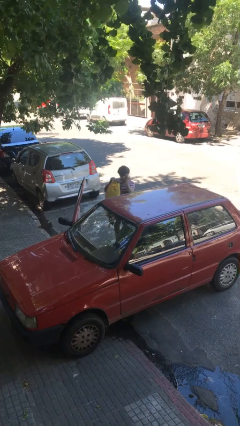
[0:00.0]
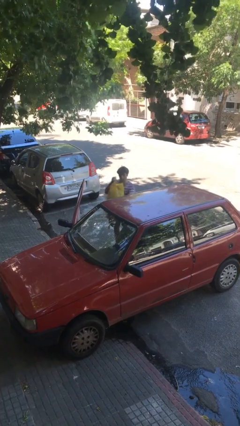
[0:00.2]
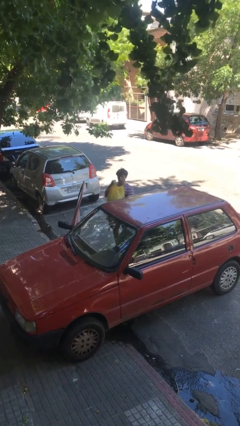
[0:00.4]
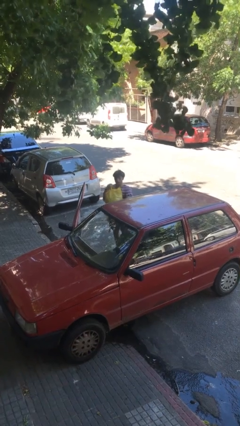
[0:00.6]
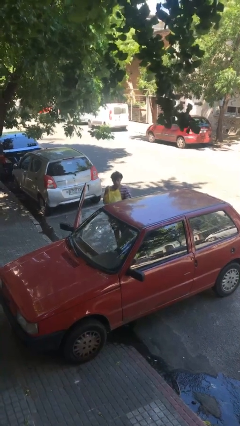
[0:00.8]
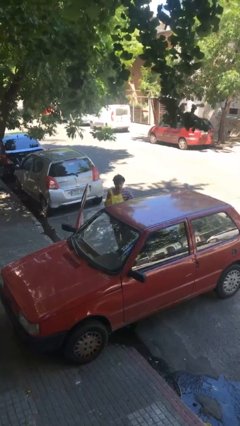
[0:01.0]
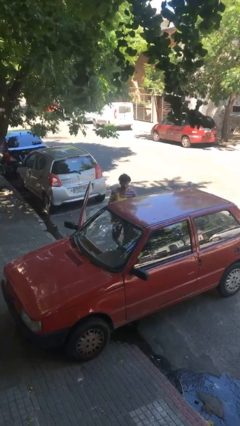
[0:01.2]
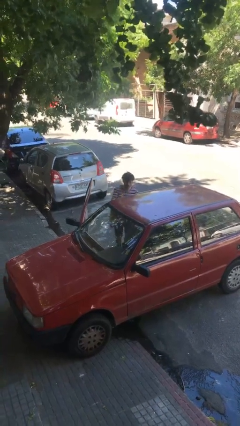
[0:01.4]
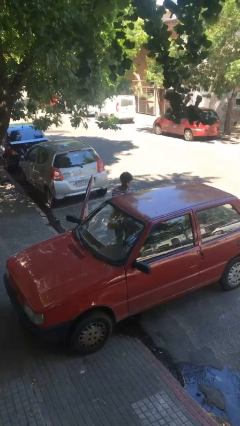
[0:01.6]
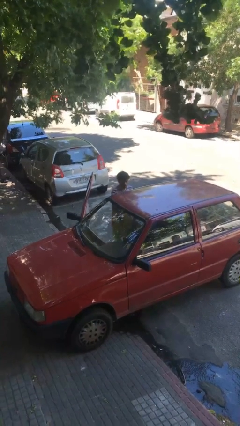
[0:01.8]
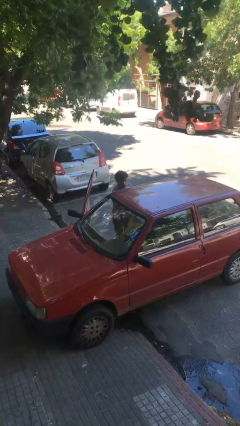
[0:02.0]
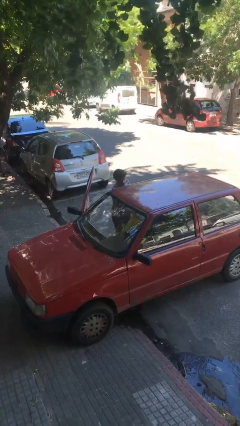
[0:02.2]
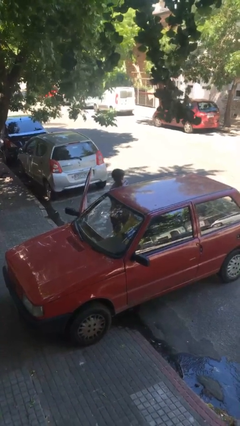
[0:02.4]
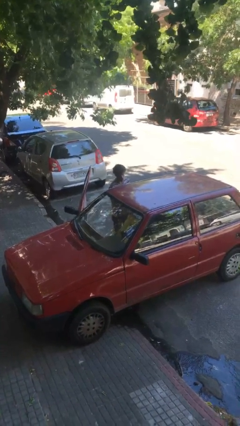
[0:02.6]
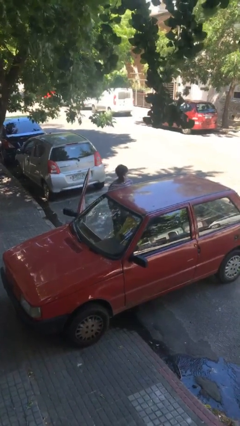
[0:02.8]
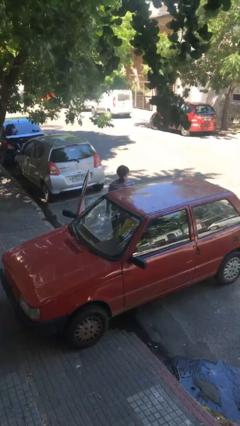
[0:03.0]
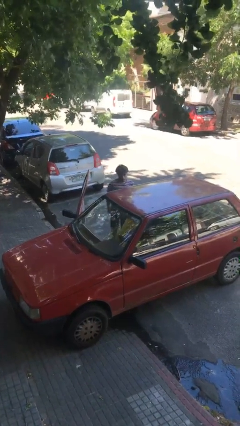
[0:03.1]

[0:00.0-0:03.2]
person loads car

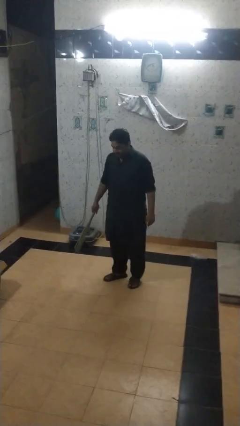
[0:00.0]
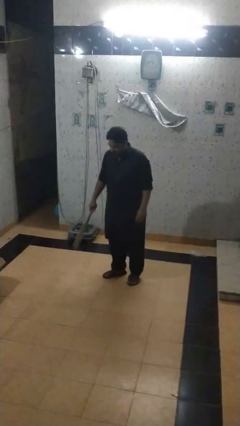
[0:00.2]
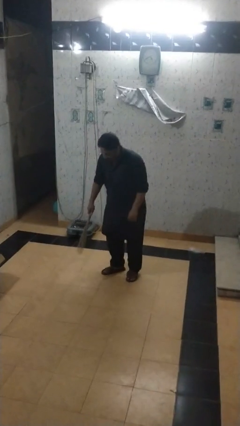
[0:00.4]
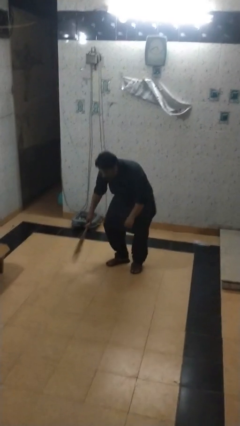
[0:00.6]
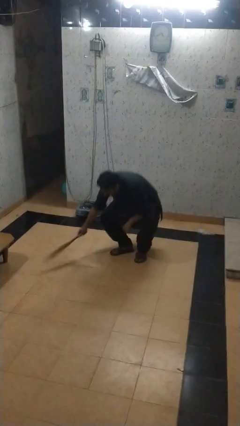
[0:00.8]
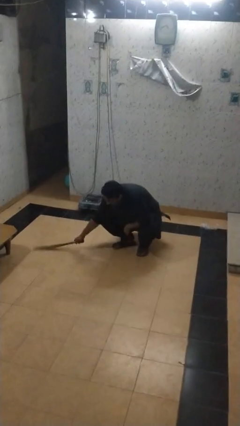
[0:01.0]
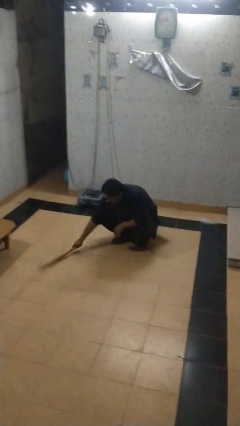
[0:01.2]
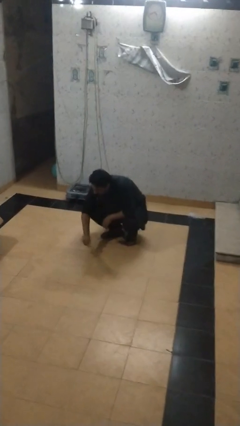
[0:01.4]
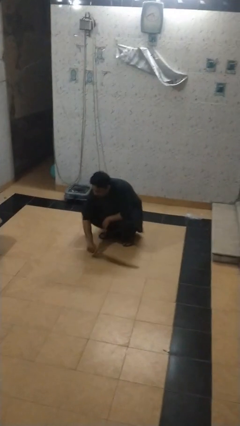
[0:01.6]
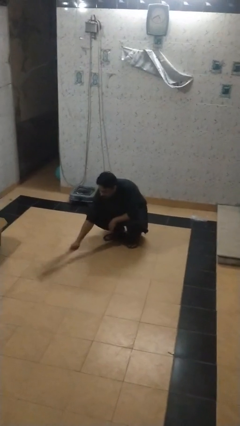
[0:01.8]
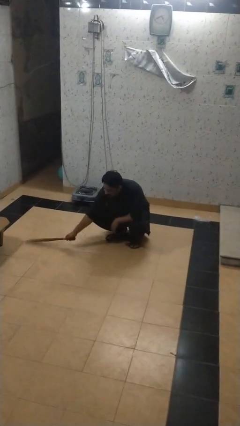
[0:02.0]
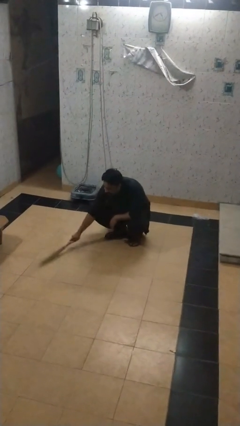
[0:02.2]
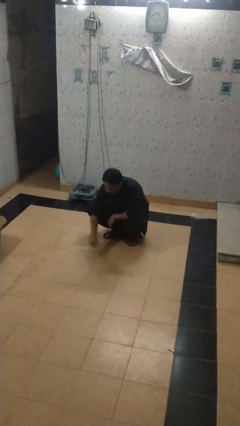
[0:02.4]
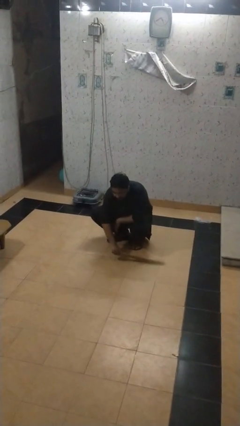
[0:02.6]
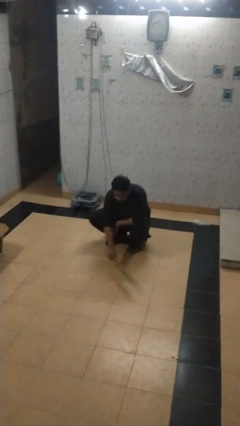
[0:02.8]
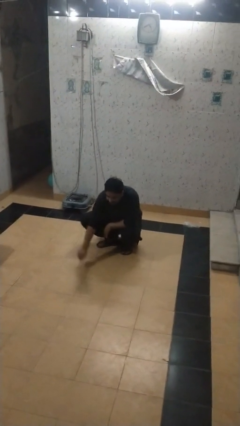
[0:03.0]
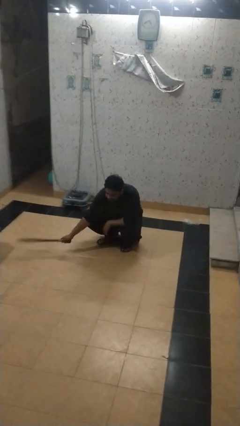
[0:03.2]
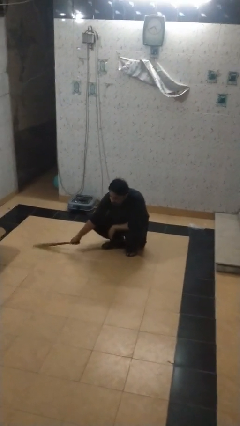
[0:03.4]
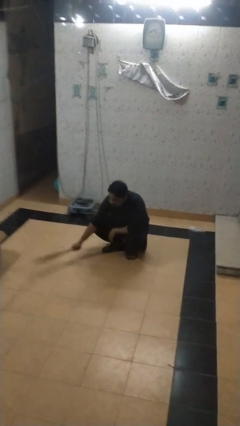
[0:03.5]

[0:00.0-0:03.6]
person sweeps floor

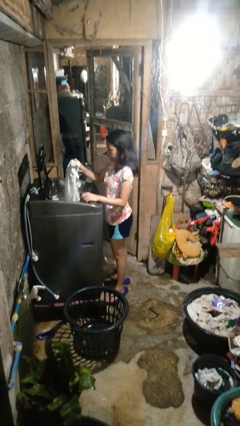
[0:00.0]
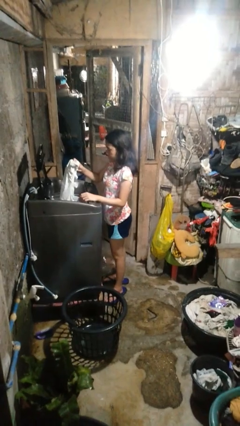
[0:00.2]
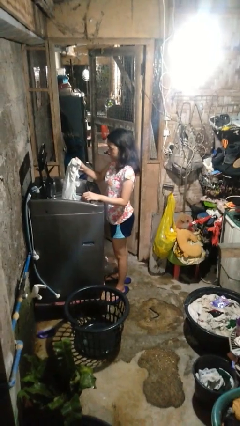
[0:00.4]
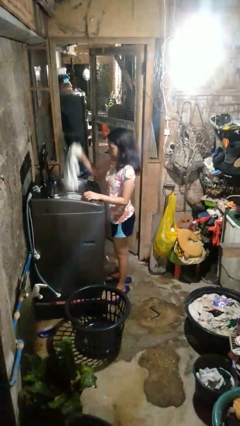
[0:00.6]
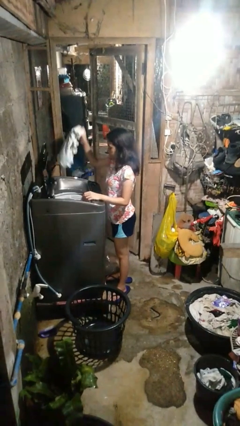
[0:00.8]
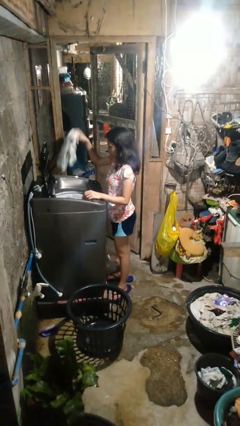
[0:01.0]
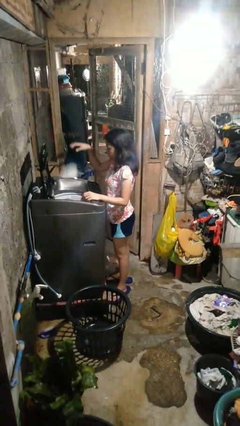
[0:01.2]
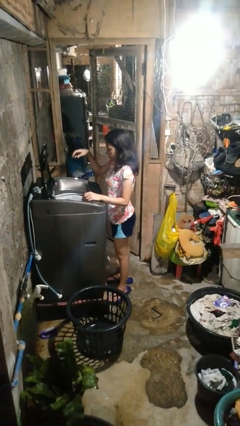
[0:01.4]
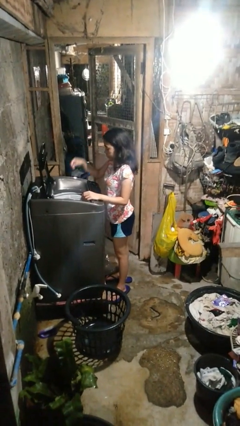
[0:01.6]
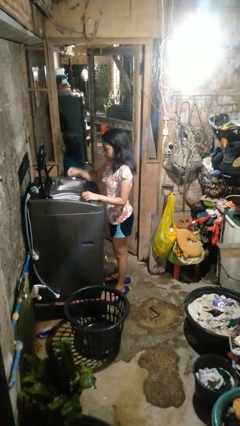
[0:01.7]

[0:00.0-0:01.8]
person loads dryer

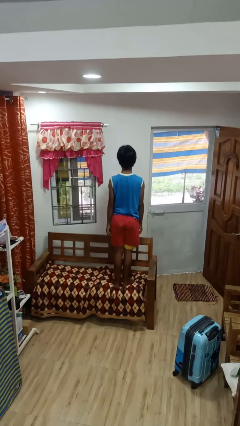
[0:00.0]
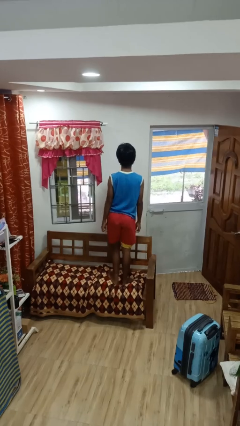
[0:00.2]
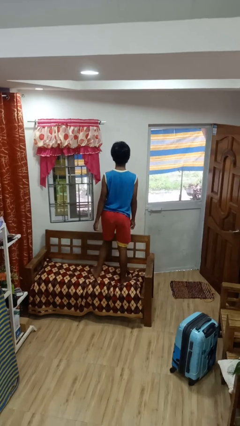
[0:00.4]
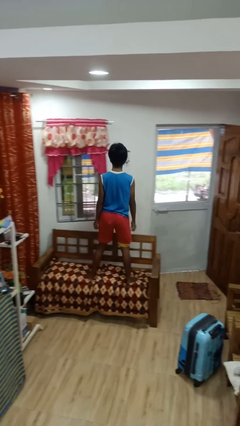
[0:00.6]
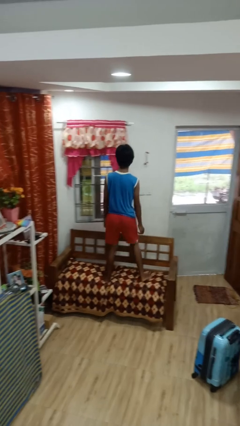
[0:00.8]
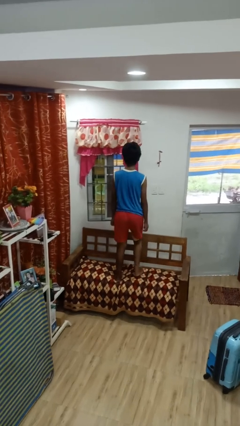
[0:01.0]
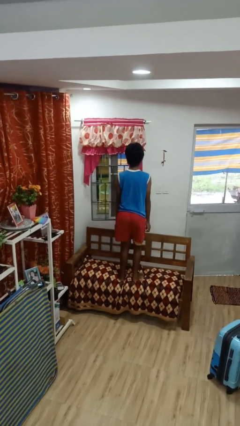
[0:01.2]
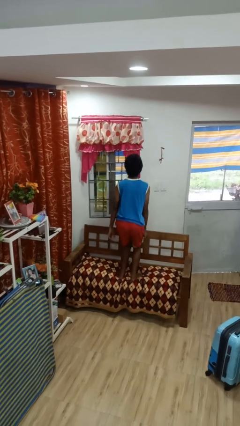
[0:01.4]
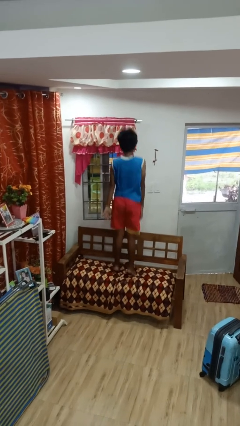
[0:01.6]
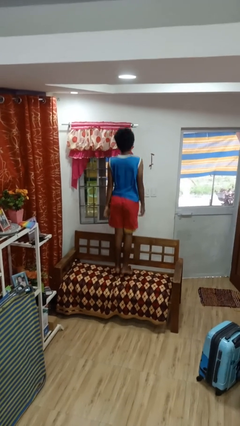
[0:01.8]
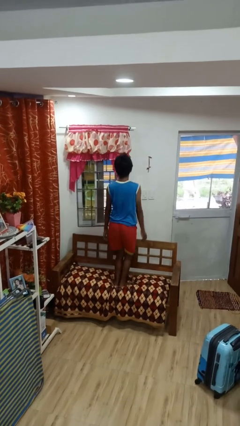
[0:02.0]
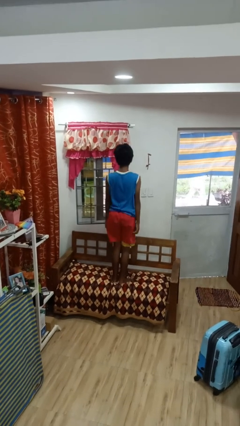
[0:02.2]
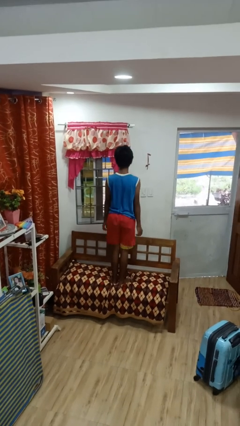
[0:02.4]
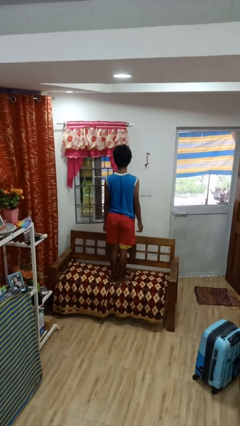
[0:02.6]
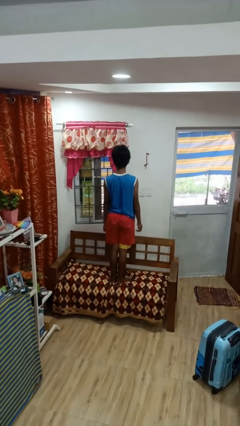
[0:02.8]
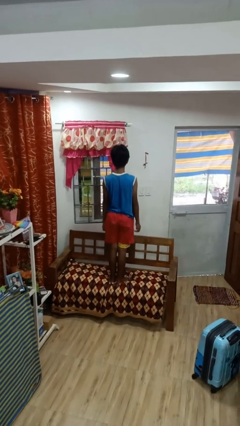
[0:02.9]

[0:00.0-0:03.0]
person jumps on couch

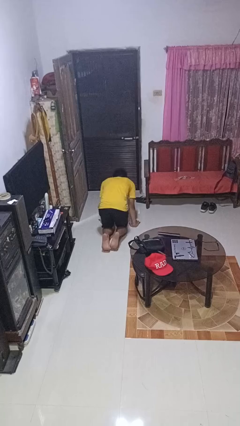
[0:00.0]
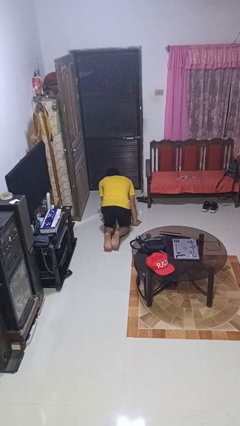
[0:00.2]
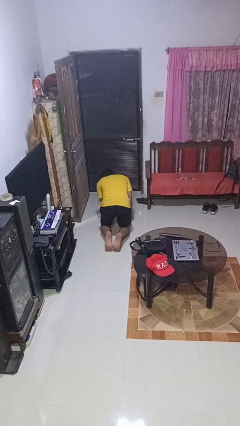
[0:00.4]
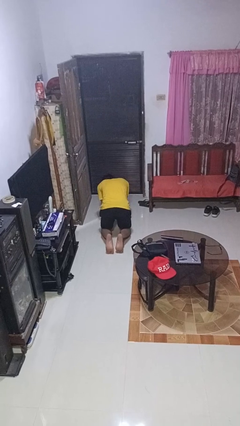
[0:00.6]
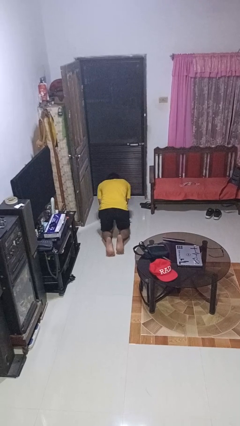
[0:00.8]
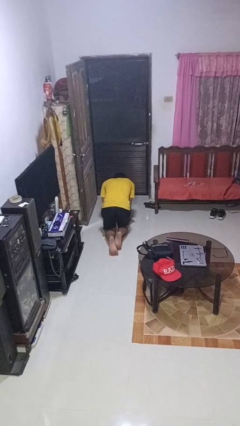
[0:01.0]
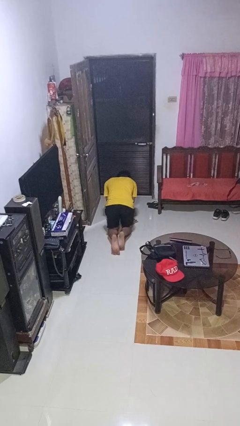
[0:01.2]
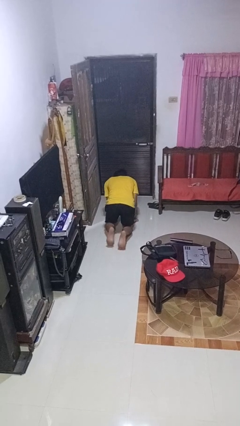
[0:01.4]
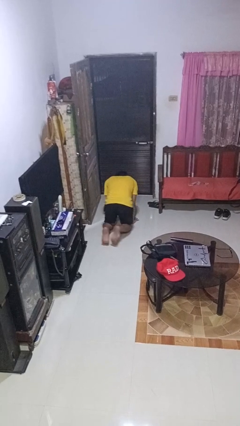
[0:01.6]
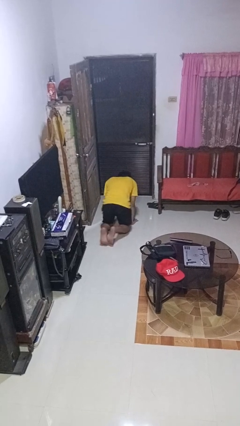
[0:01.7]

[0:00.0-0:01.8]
person crawls

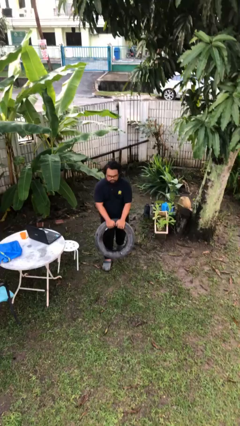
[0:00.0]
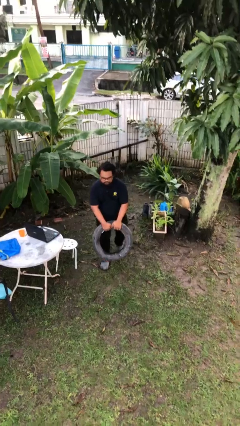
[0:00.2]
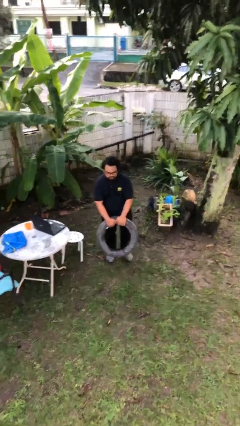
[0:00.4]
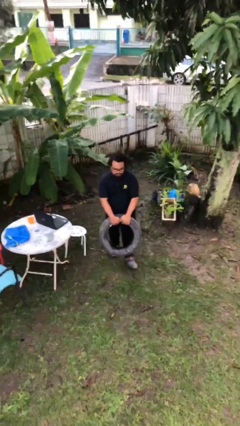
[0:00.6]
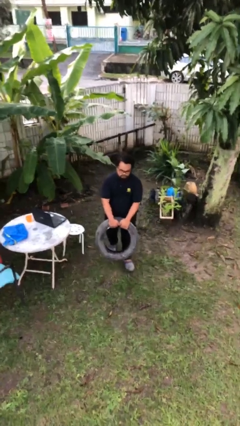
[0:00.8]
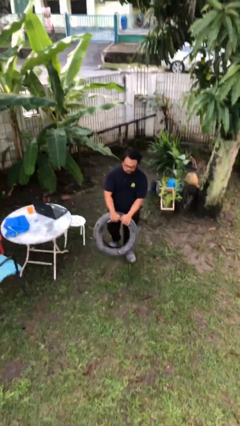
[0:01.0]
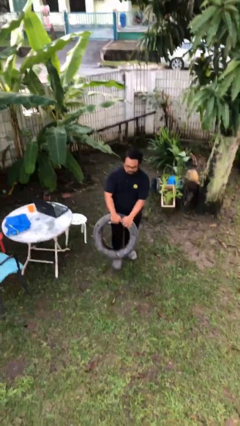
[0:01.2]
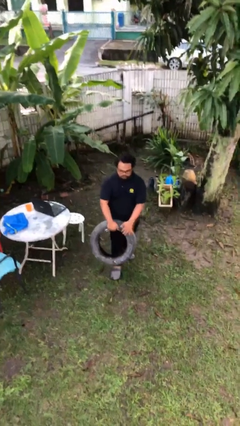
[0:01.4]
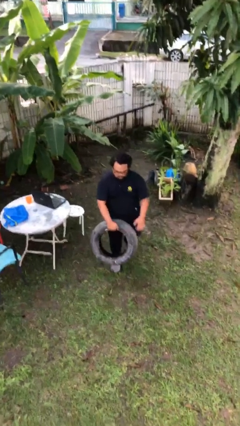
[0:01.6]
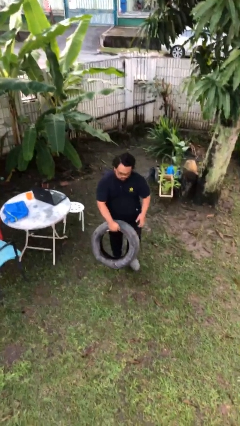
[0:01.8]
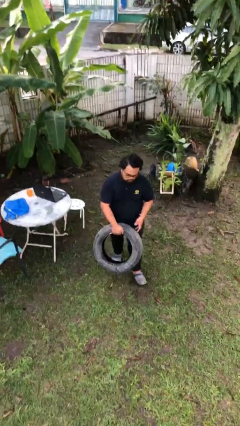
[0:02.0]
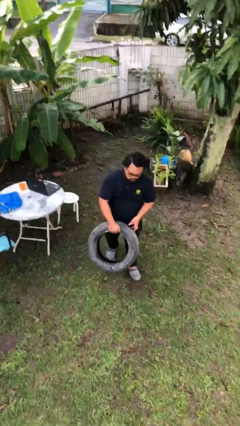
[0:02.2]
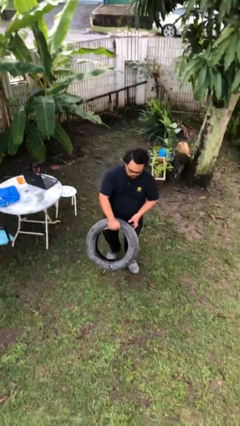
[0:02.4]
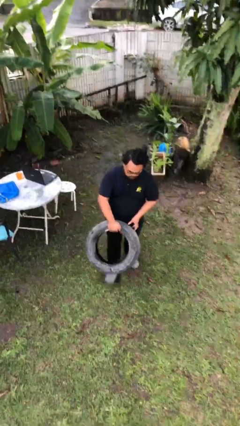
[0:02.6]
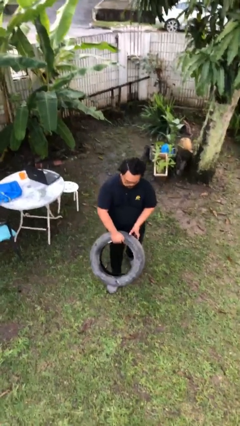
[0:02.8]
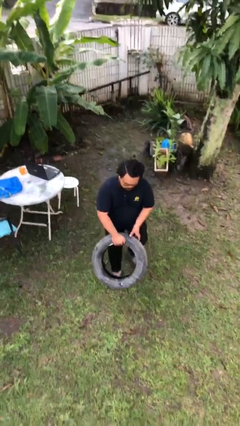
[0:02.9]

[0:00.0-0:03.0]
person carries heavy object

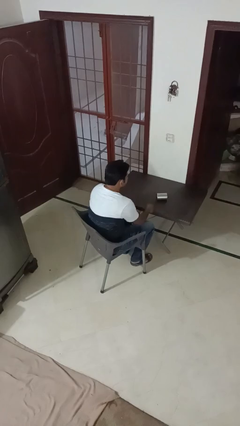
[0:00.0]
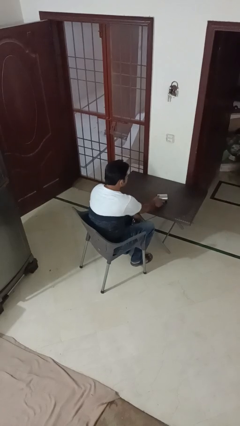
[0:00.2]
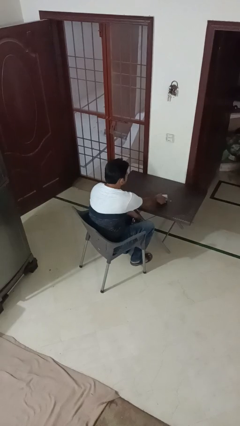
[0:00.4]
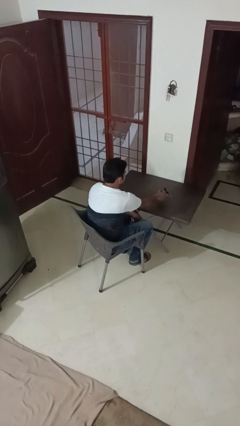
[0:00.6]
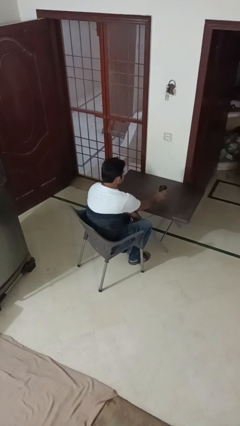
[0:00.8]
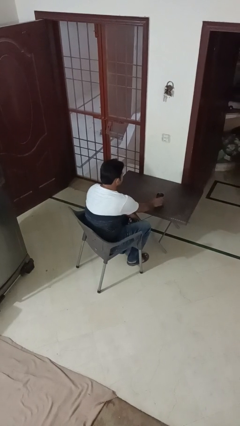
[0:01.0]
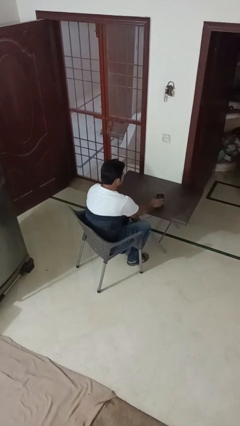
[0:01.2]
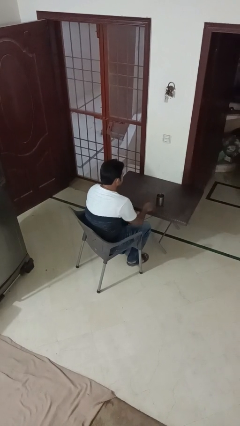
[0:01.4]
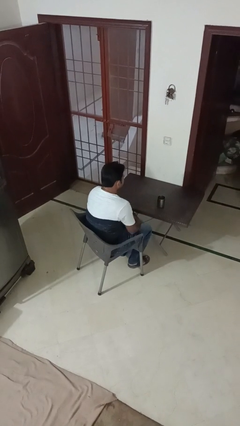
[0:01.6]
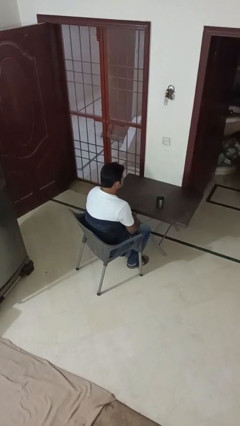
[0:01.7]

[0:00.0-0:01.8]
person sets upright glass
